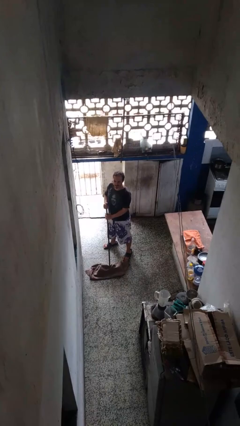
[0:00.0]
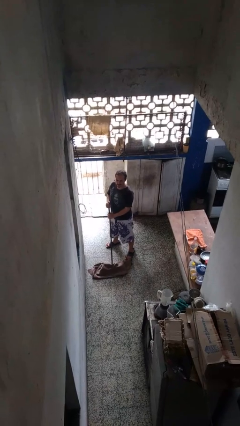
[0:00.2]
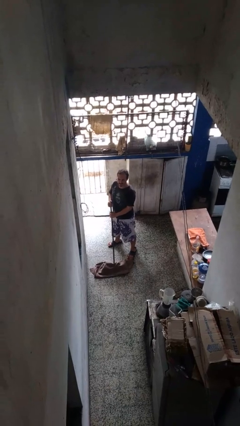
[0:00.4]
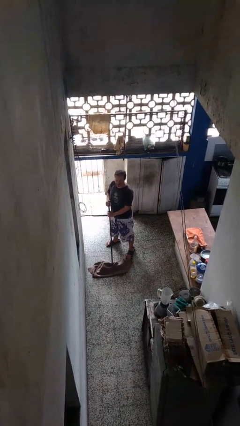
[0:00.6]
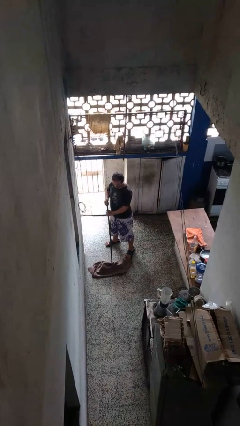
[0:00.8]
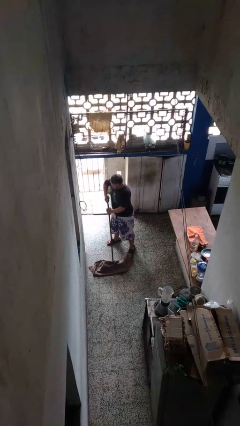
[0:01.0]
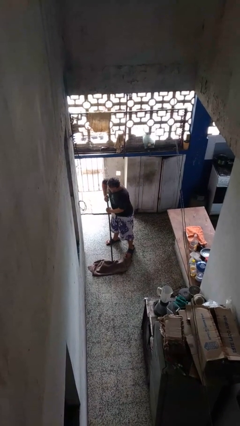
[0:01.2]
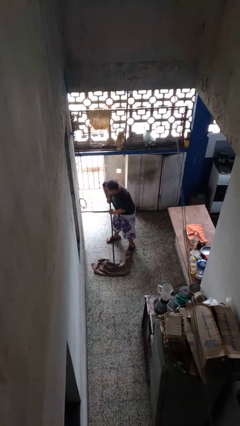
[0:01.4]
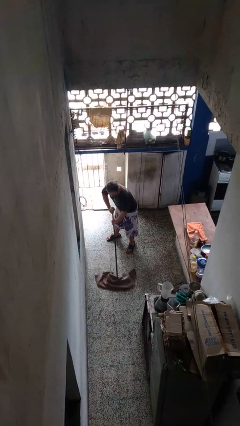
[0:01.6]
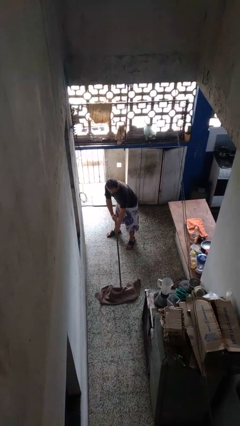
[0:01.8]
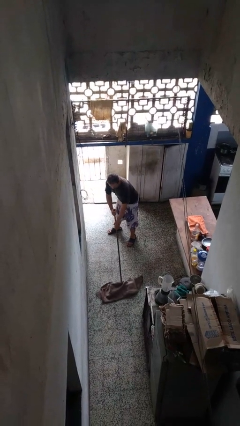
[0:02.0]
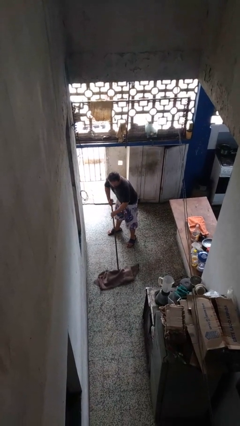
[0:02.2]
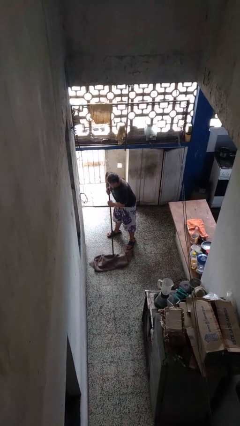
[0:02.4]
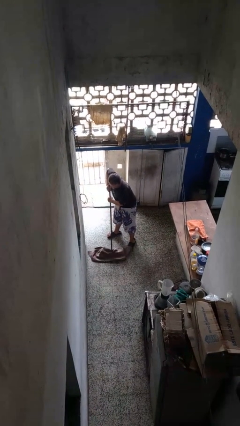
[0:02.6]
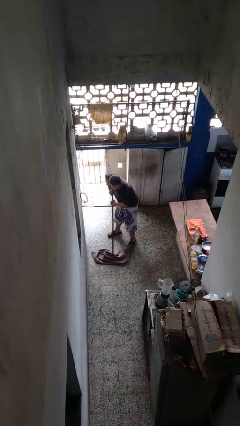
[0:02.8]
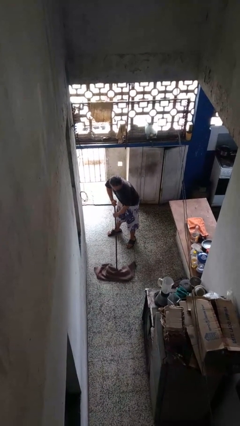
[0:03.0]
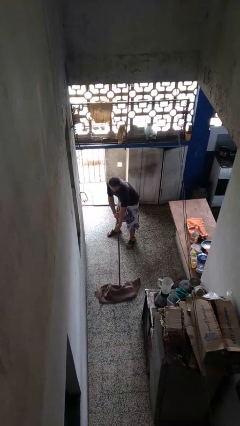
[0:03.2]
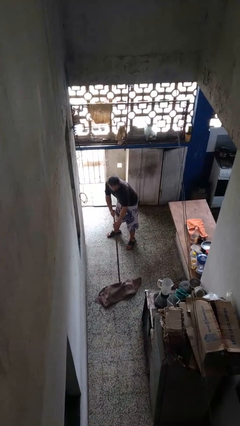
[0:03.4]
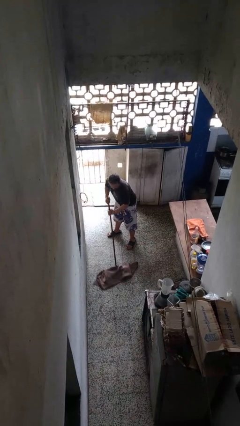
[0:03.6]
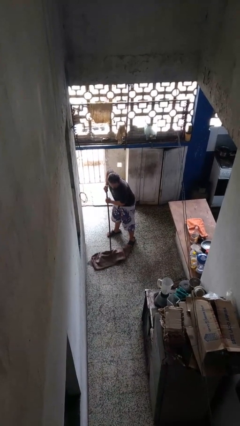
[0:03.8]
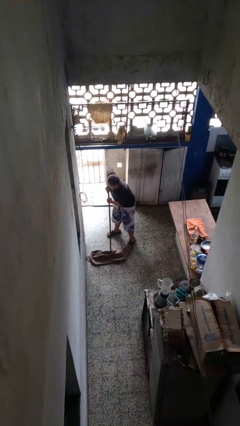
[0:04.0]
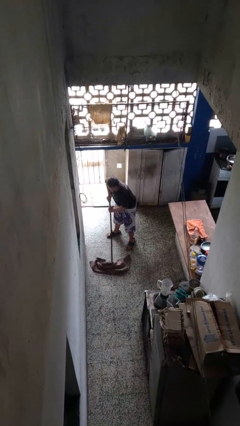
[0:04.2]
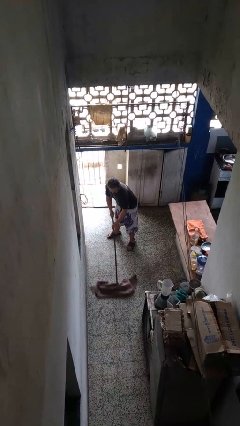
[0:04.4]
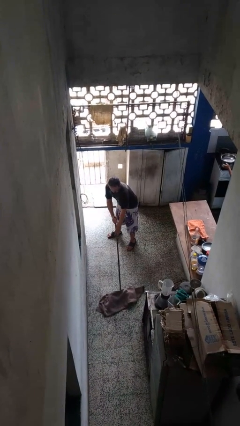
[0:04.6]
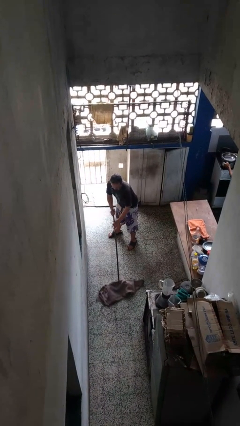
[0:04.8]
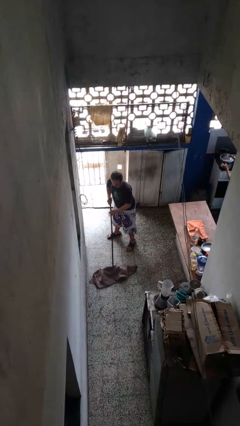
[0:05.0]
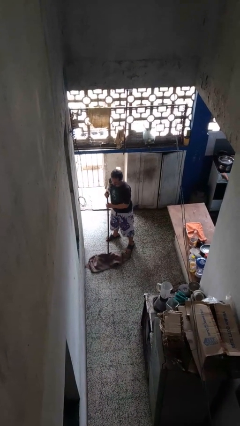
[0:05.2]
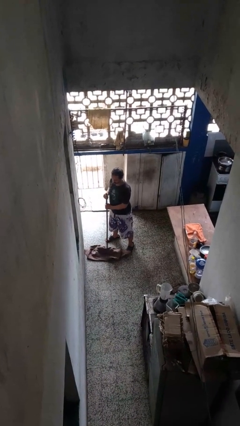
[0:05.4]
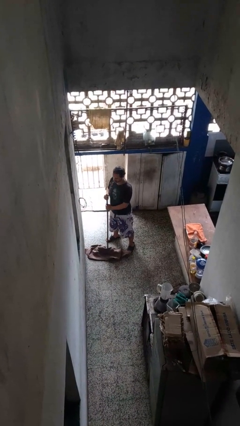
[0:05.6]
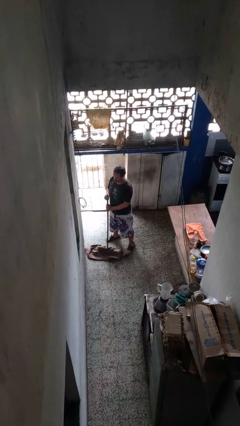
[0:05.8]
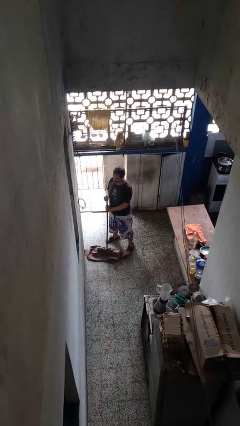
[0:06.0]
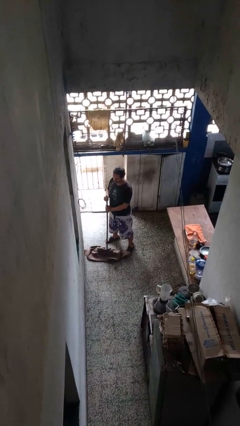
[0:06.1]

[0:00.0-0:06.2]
person mops

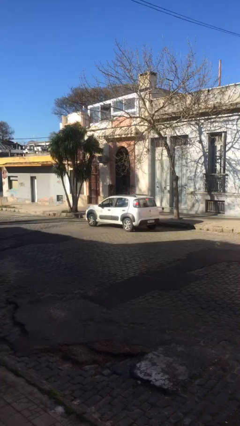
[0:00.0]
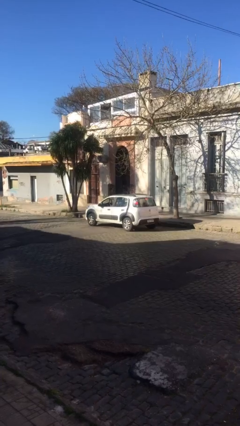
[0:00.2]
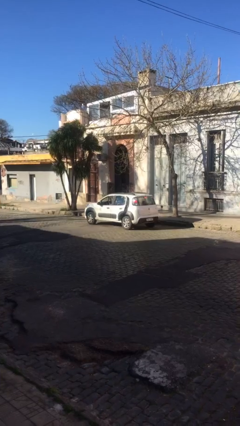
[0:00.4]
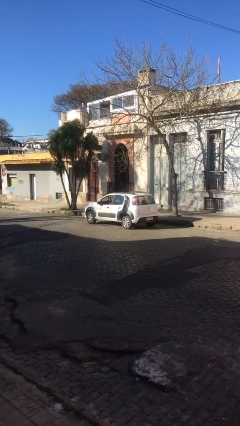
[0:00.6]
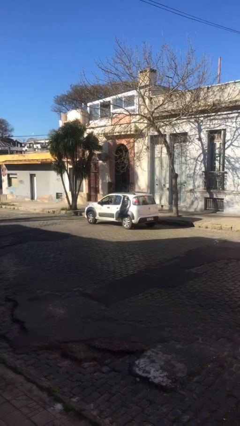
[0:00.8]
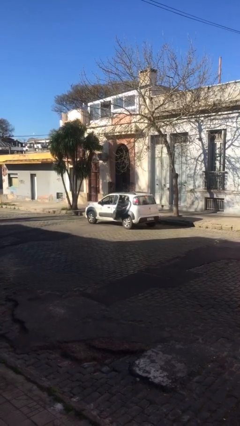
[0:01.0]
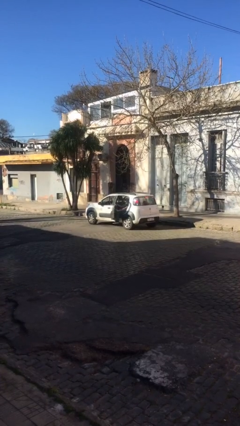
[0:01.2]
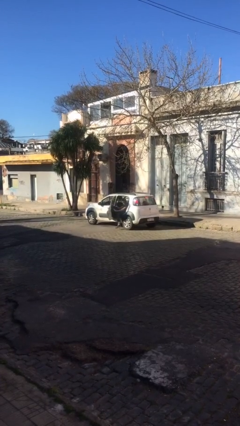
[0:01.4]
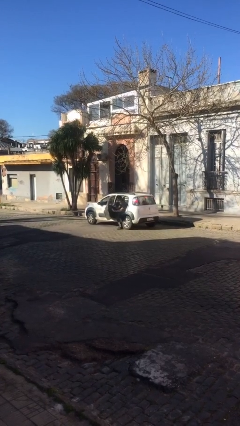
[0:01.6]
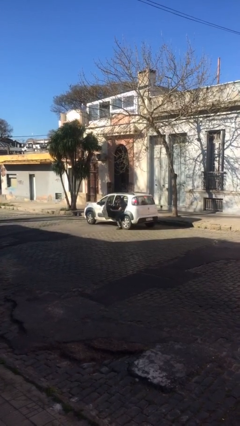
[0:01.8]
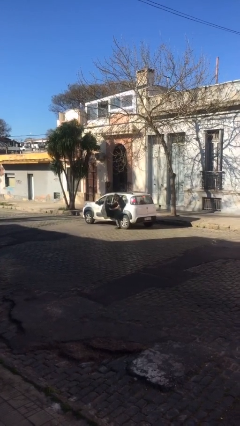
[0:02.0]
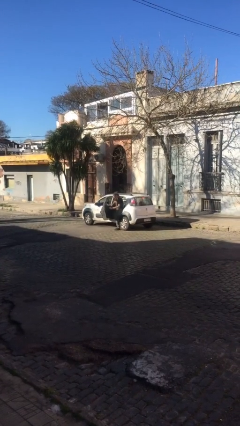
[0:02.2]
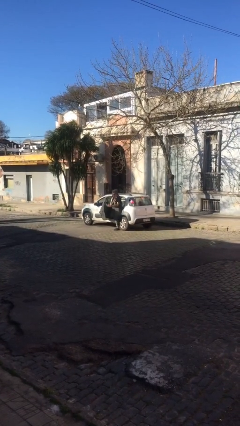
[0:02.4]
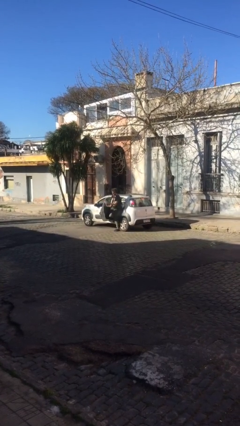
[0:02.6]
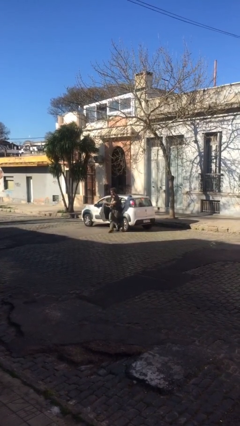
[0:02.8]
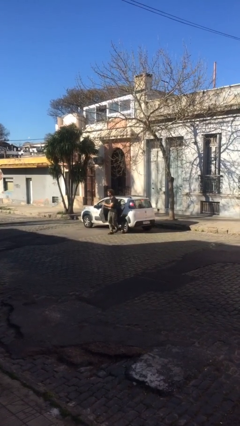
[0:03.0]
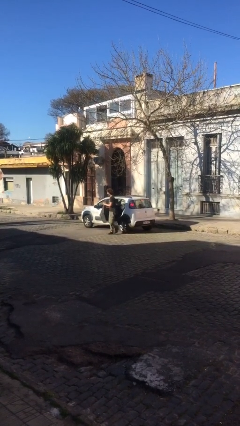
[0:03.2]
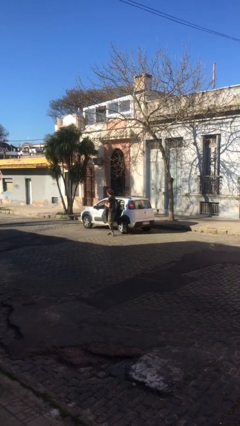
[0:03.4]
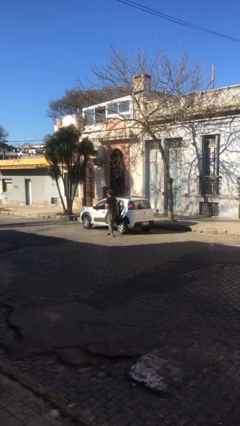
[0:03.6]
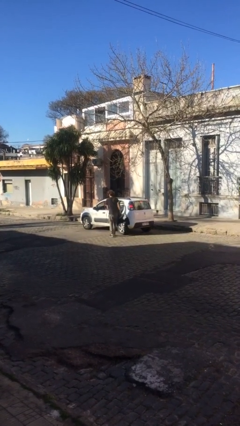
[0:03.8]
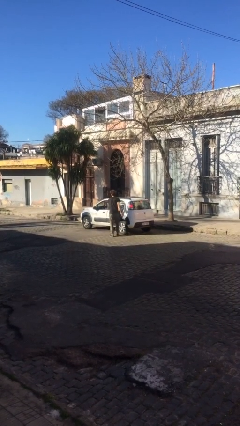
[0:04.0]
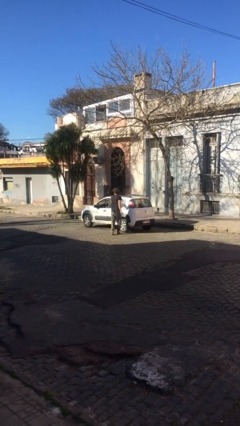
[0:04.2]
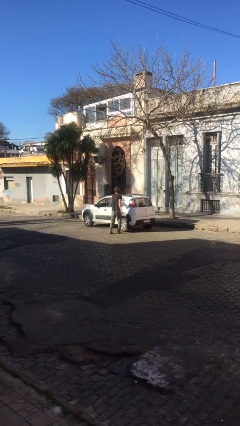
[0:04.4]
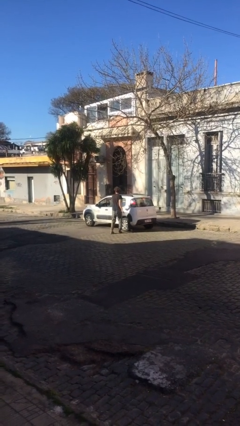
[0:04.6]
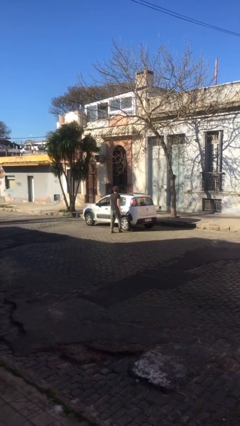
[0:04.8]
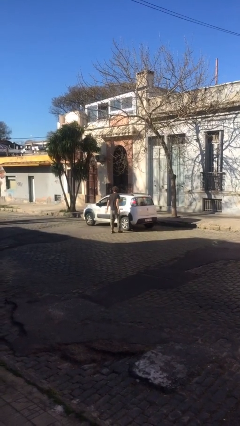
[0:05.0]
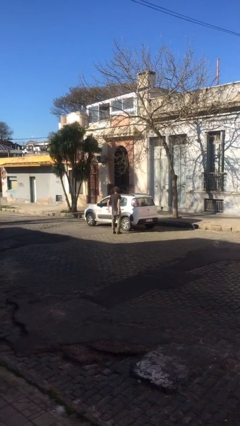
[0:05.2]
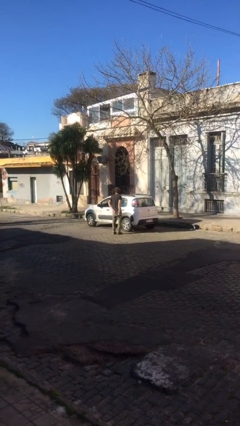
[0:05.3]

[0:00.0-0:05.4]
car drops off person

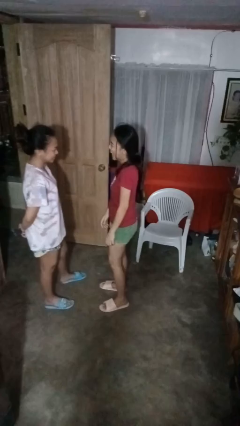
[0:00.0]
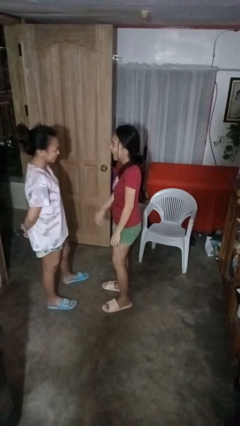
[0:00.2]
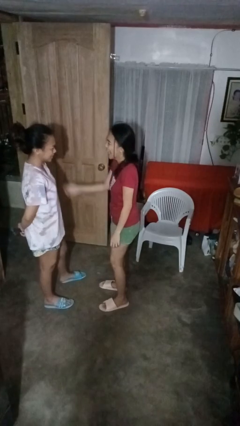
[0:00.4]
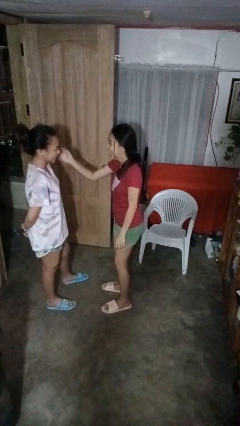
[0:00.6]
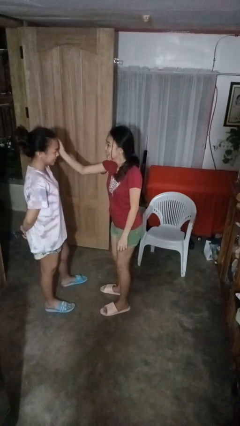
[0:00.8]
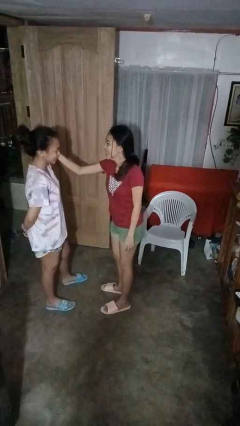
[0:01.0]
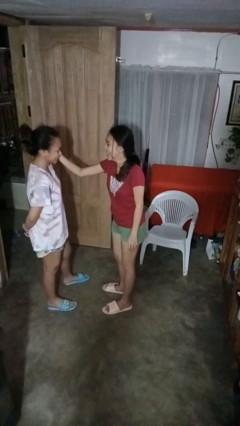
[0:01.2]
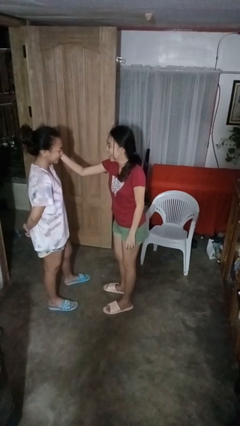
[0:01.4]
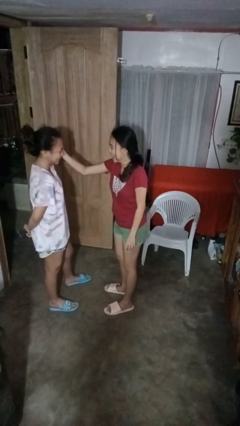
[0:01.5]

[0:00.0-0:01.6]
person touches face of person

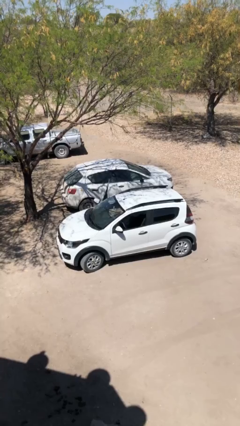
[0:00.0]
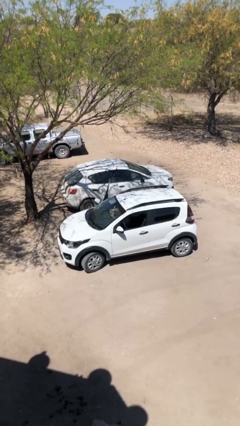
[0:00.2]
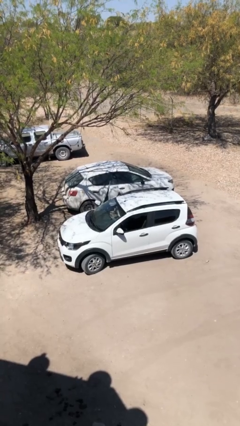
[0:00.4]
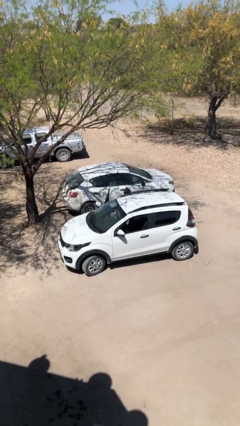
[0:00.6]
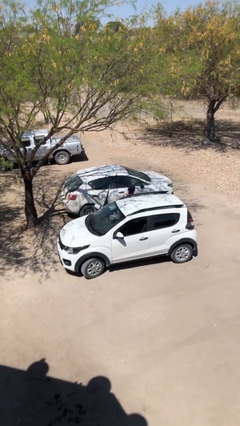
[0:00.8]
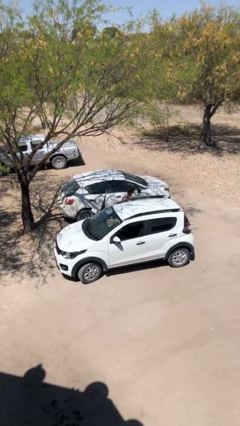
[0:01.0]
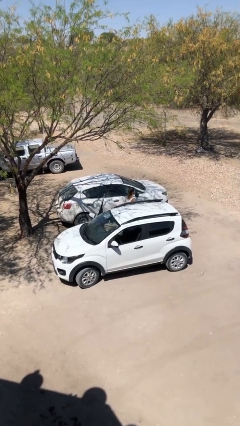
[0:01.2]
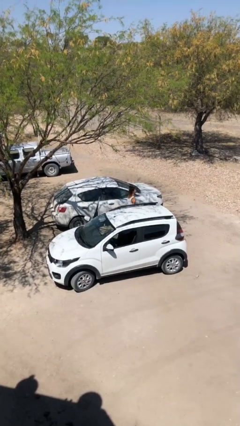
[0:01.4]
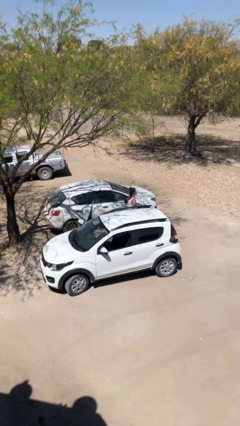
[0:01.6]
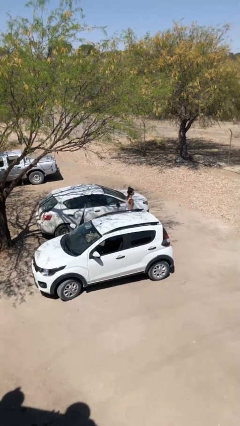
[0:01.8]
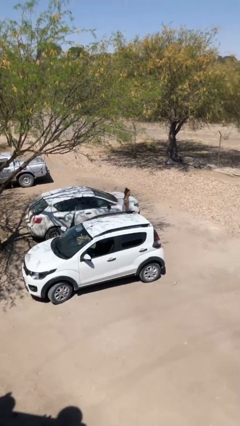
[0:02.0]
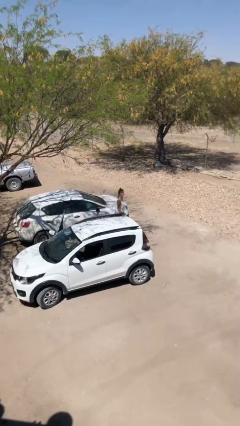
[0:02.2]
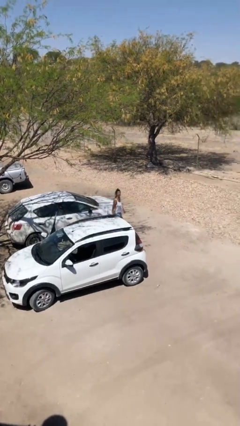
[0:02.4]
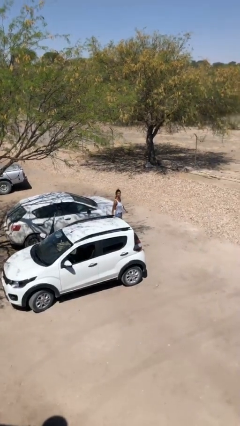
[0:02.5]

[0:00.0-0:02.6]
person exits car

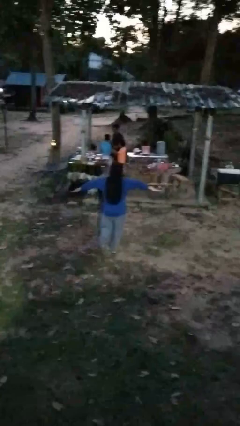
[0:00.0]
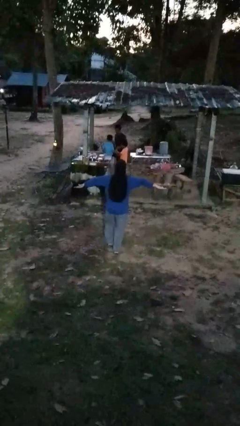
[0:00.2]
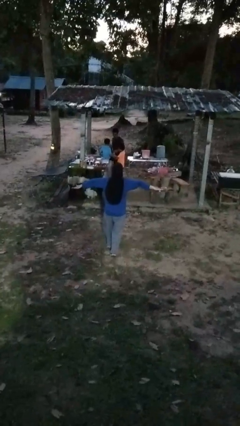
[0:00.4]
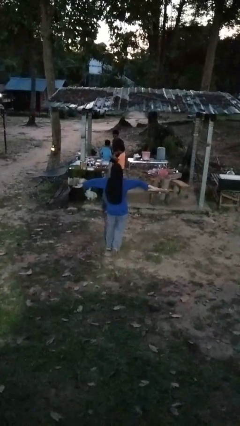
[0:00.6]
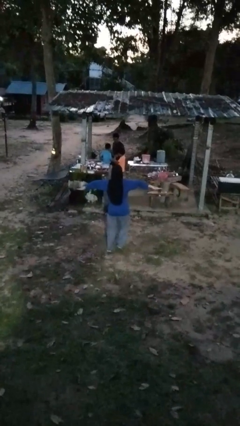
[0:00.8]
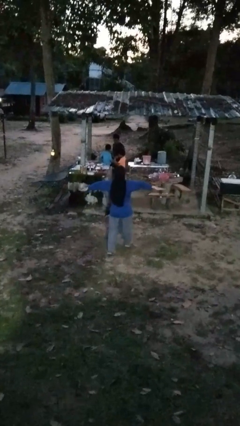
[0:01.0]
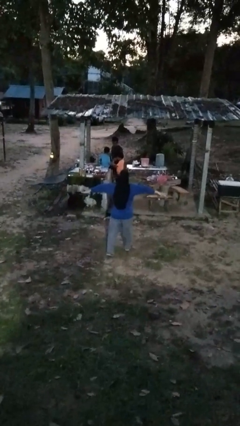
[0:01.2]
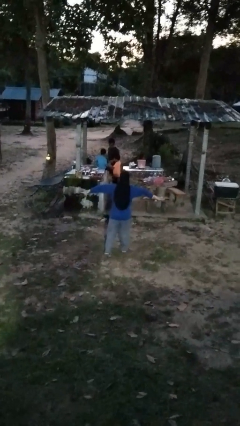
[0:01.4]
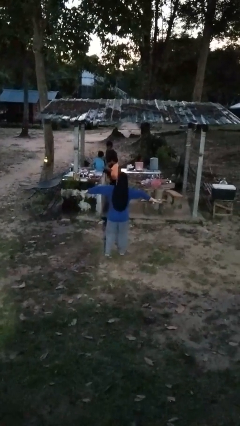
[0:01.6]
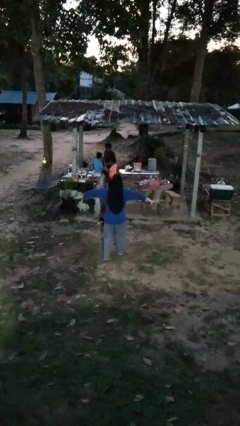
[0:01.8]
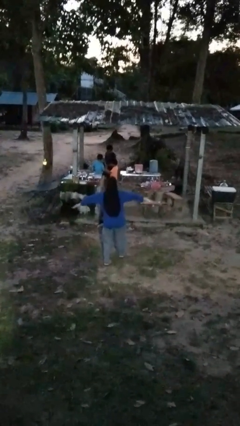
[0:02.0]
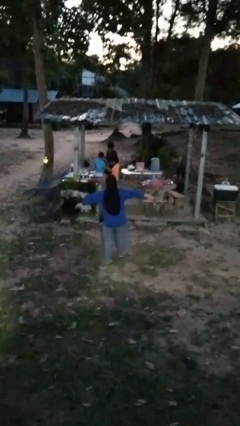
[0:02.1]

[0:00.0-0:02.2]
person walks tiptoe
